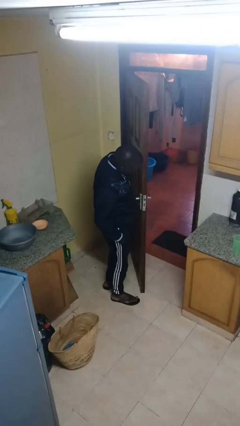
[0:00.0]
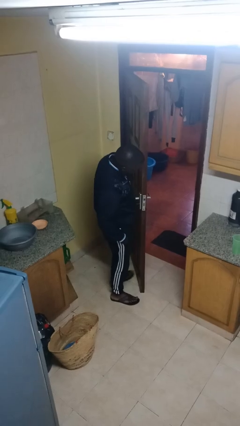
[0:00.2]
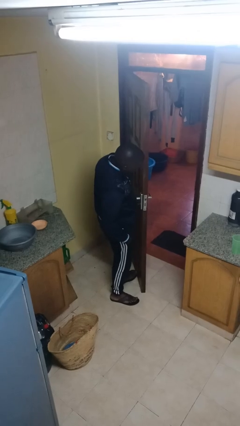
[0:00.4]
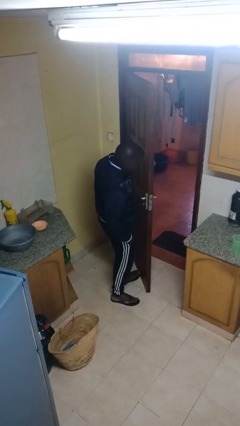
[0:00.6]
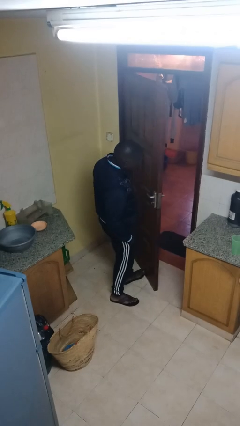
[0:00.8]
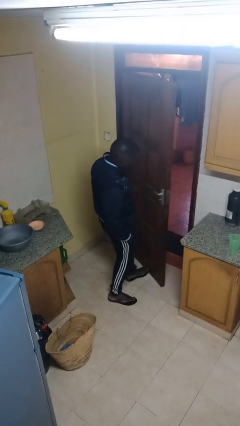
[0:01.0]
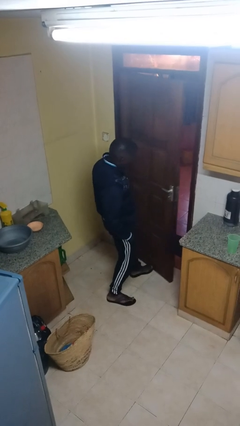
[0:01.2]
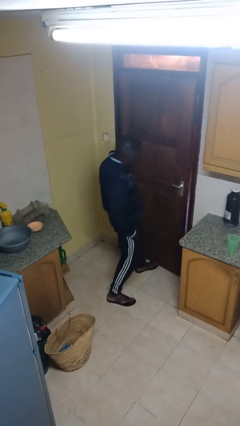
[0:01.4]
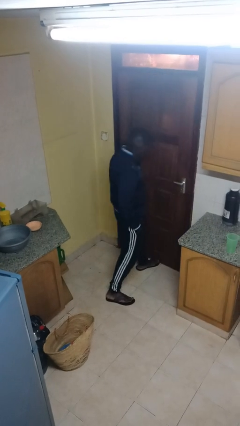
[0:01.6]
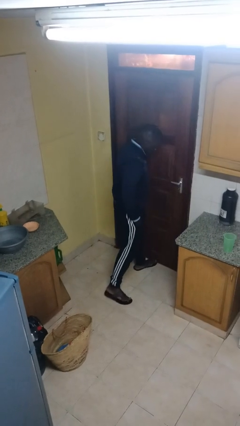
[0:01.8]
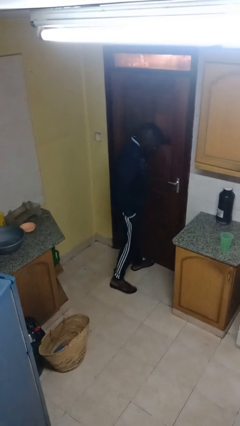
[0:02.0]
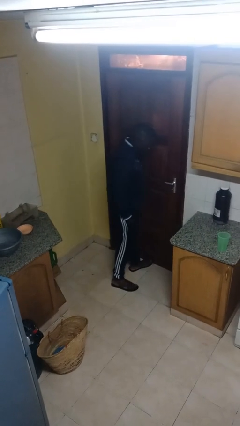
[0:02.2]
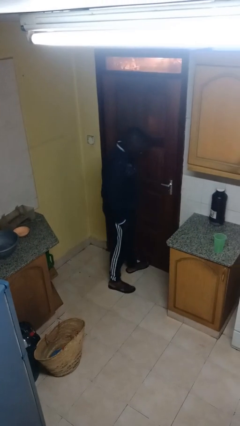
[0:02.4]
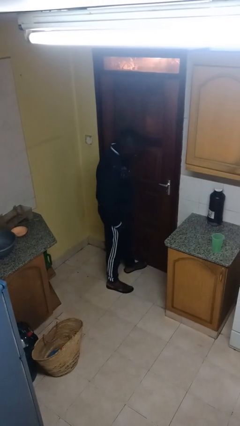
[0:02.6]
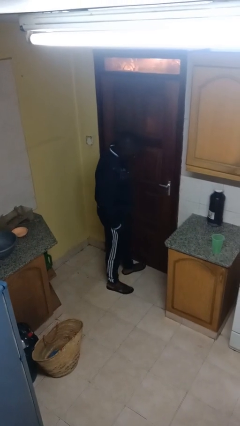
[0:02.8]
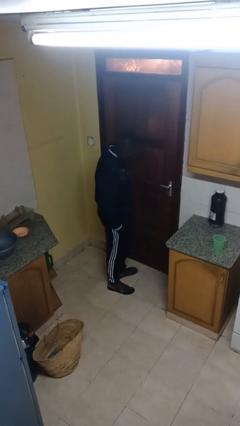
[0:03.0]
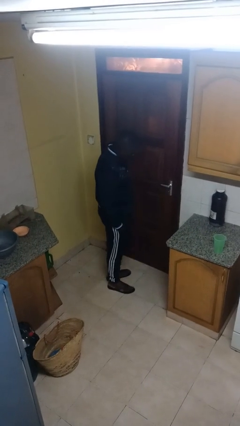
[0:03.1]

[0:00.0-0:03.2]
person closes door with foot

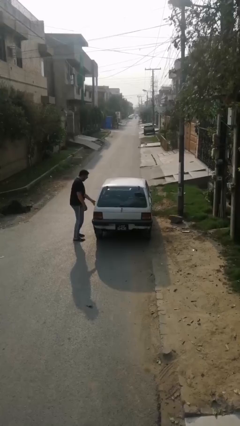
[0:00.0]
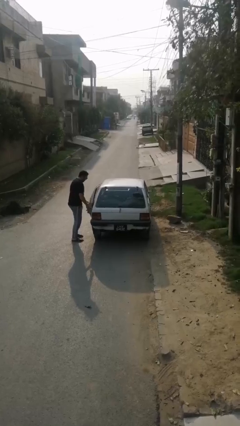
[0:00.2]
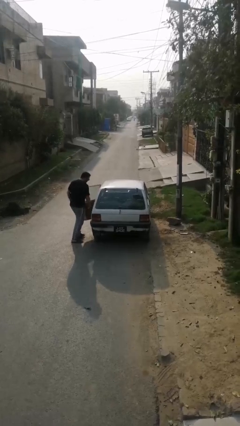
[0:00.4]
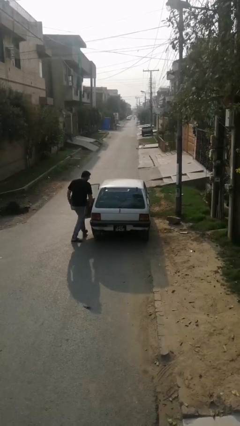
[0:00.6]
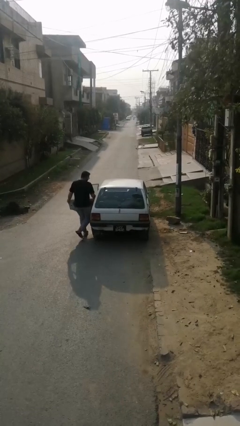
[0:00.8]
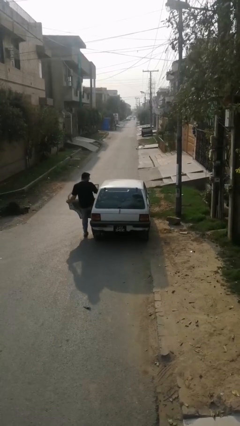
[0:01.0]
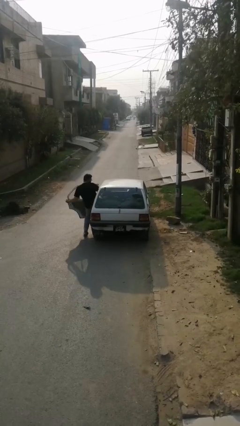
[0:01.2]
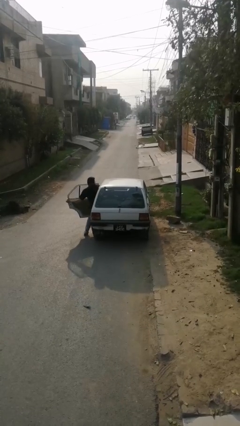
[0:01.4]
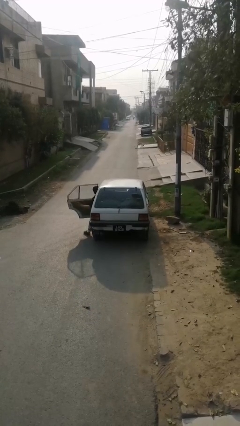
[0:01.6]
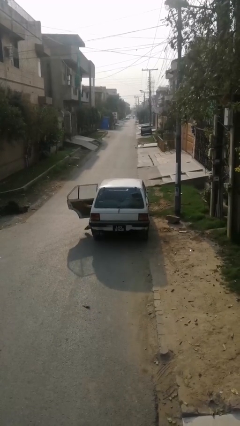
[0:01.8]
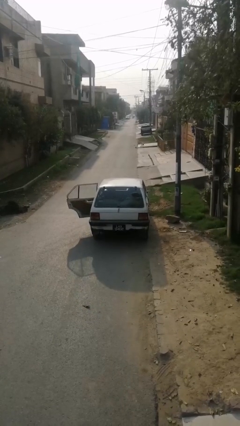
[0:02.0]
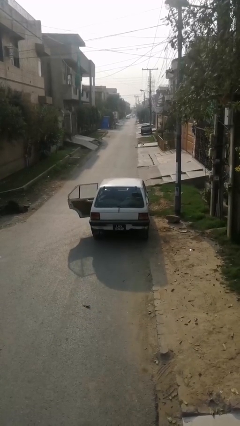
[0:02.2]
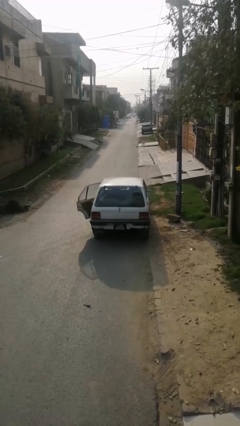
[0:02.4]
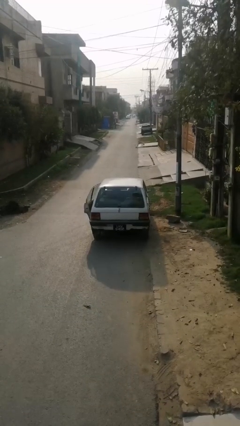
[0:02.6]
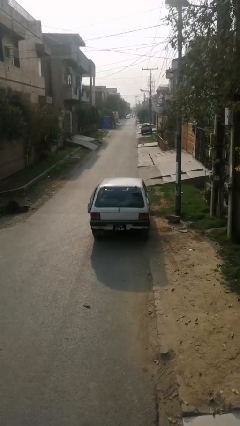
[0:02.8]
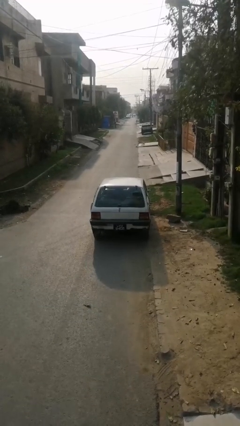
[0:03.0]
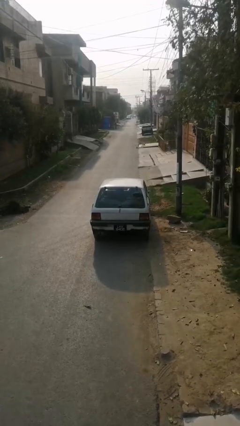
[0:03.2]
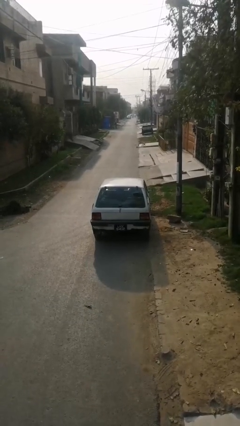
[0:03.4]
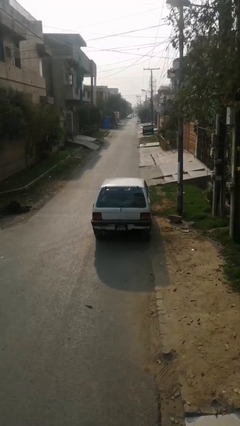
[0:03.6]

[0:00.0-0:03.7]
car picks up person

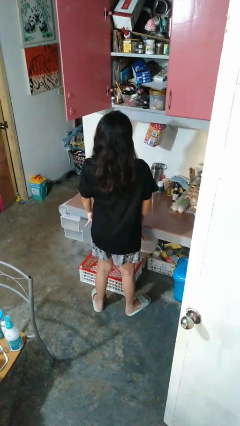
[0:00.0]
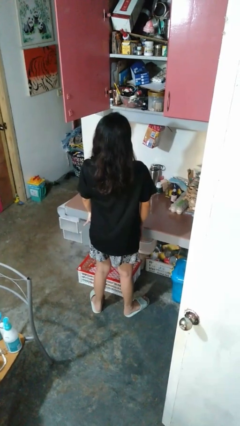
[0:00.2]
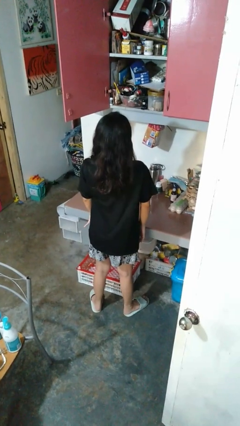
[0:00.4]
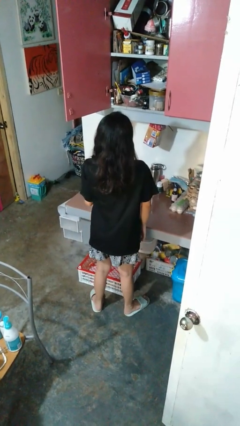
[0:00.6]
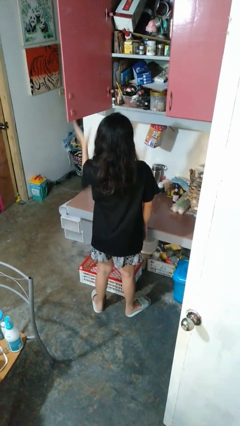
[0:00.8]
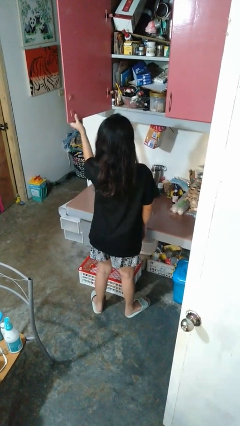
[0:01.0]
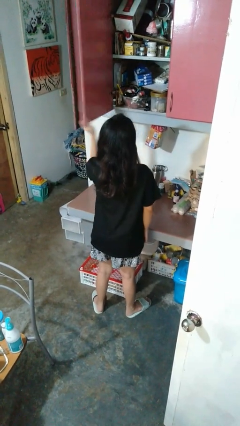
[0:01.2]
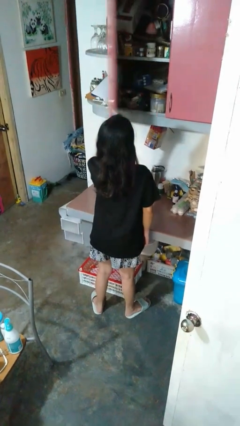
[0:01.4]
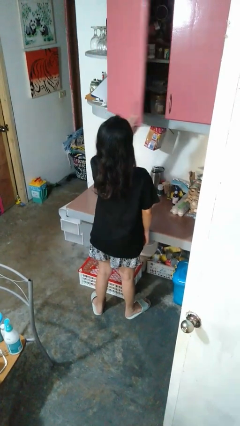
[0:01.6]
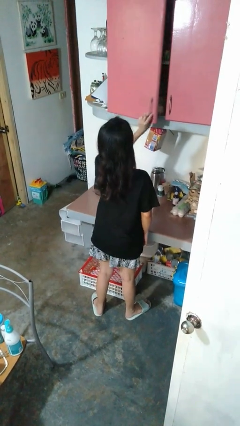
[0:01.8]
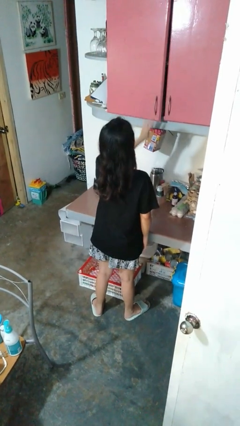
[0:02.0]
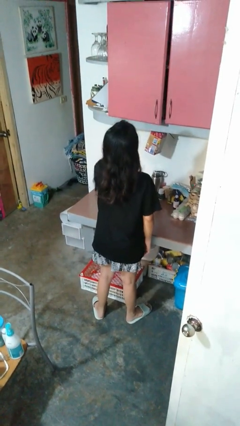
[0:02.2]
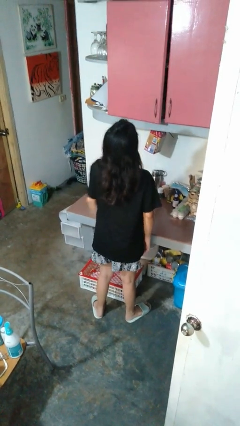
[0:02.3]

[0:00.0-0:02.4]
person closes cabinet

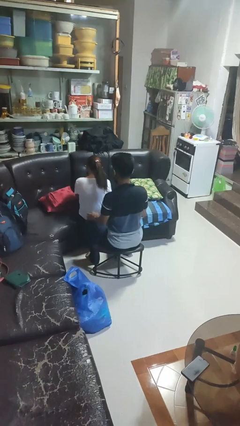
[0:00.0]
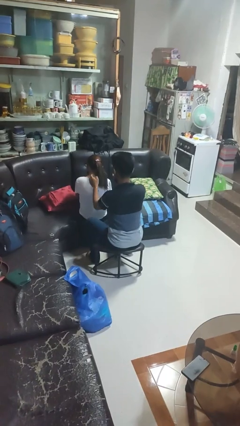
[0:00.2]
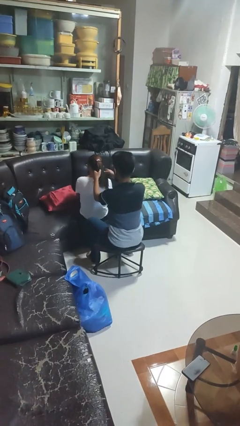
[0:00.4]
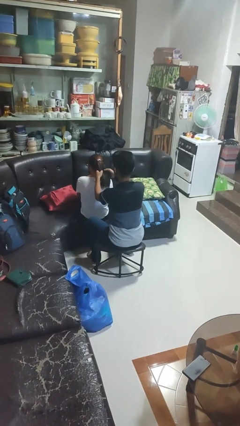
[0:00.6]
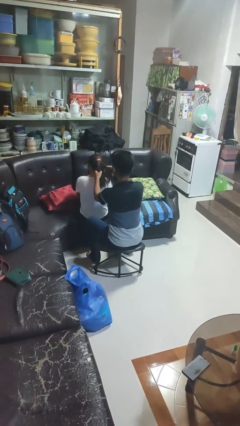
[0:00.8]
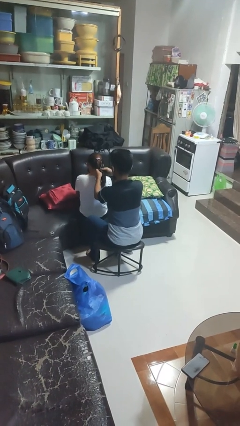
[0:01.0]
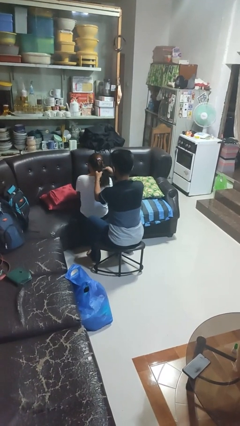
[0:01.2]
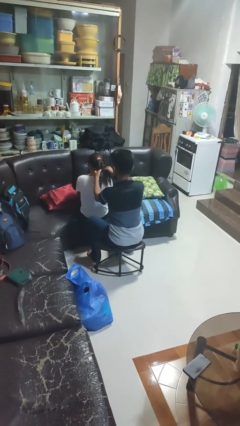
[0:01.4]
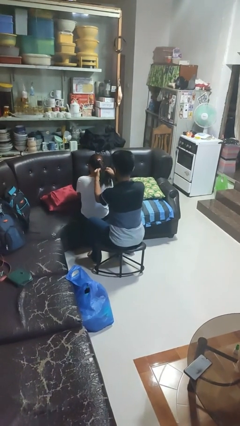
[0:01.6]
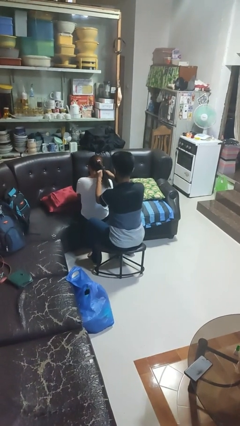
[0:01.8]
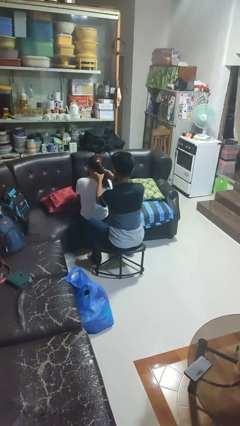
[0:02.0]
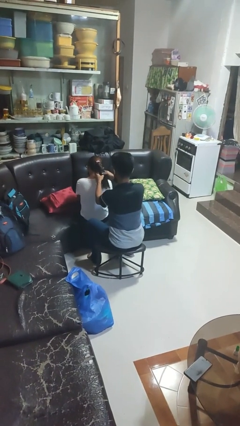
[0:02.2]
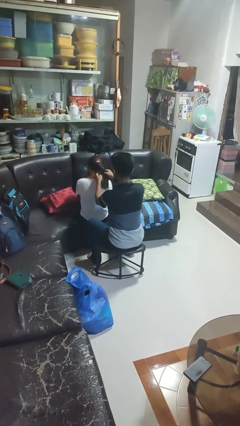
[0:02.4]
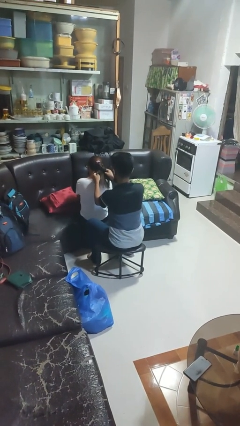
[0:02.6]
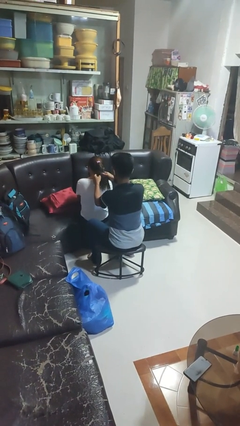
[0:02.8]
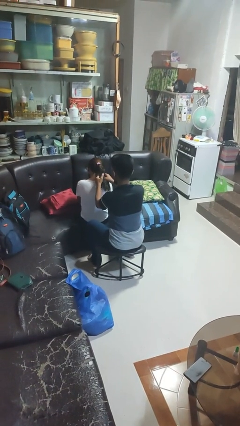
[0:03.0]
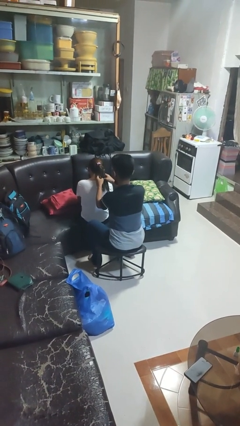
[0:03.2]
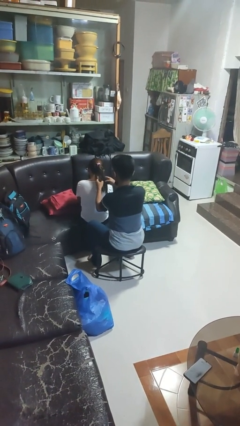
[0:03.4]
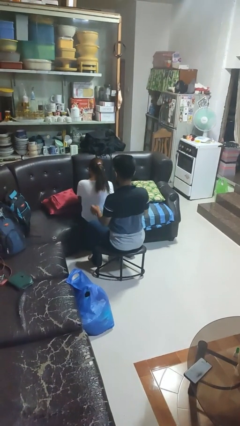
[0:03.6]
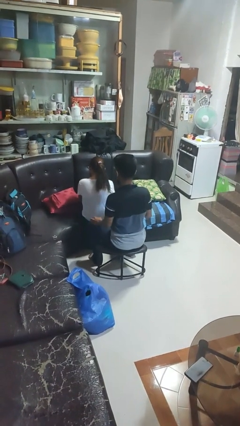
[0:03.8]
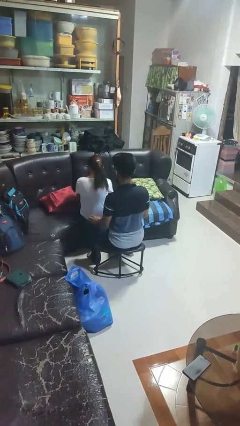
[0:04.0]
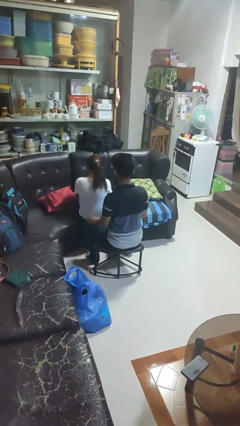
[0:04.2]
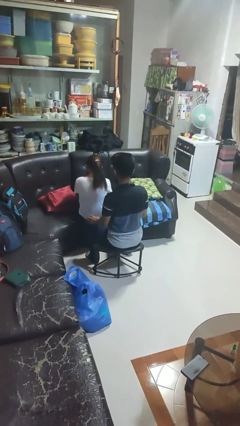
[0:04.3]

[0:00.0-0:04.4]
person braids hair of person

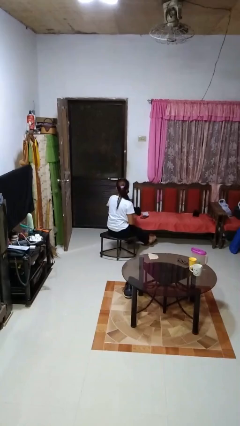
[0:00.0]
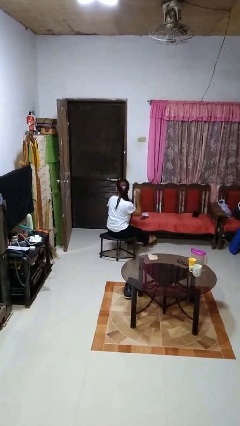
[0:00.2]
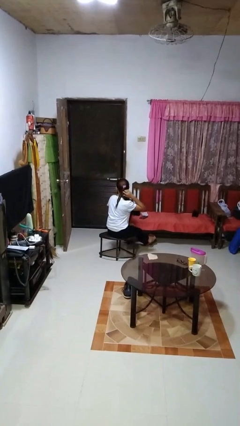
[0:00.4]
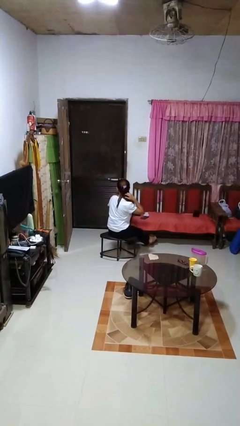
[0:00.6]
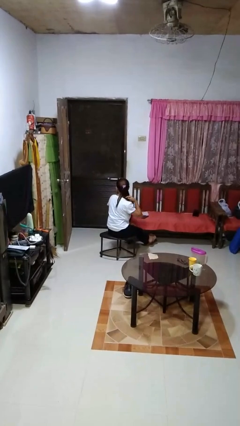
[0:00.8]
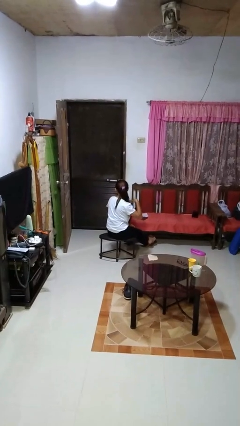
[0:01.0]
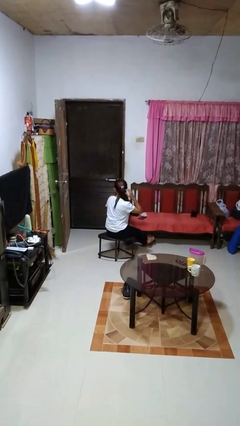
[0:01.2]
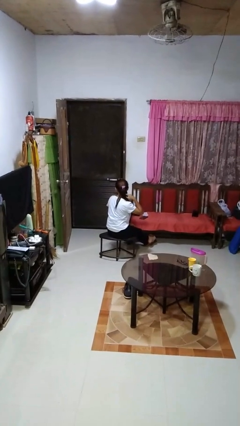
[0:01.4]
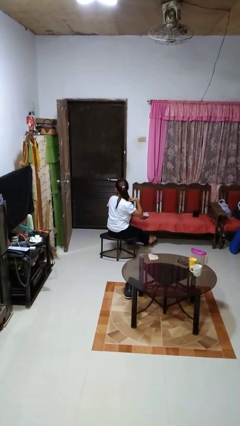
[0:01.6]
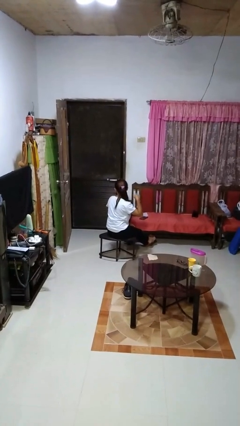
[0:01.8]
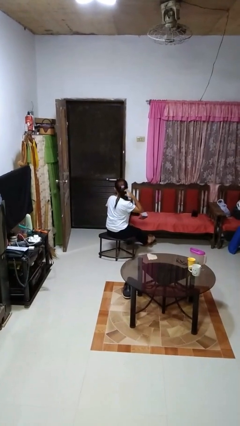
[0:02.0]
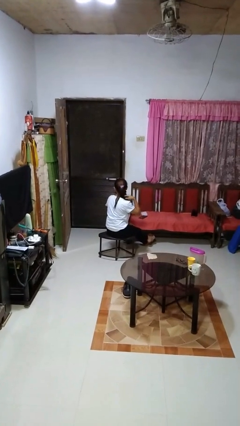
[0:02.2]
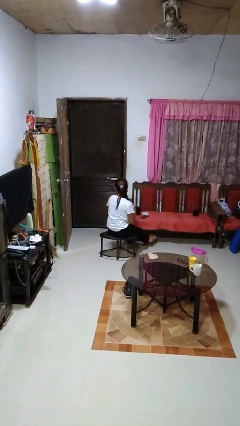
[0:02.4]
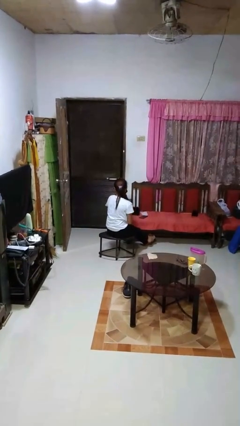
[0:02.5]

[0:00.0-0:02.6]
person strokes hair

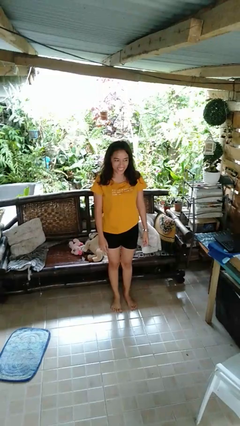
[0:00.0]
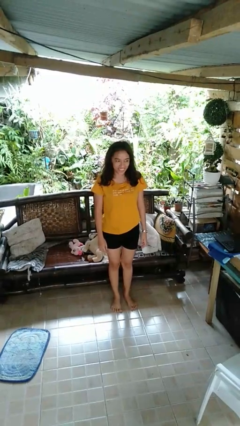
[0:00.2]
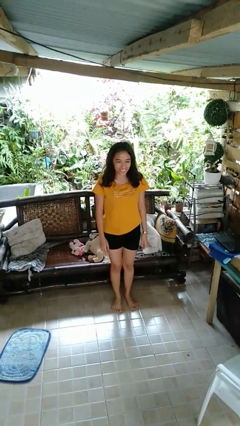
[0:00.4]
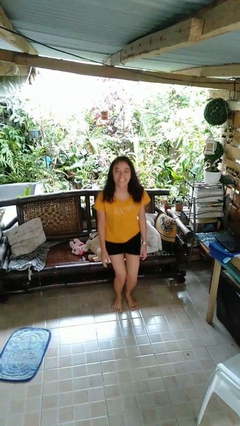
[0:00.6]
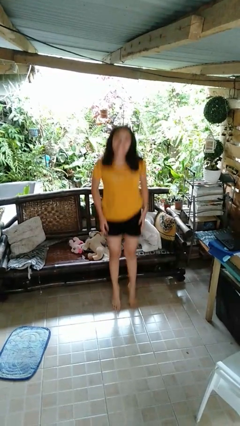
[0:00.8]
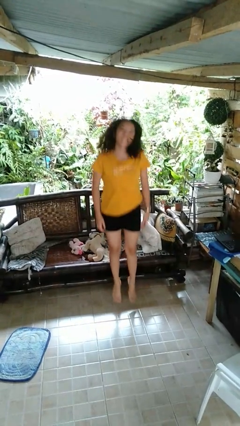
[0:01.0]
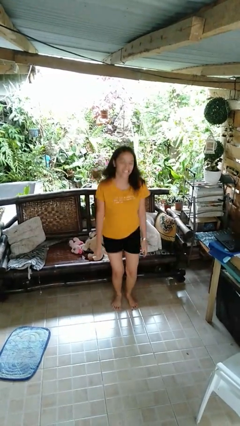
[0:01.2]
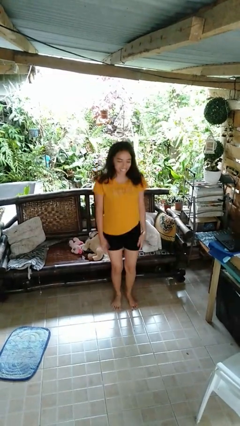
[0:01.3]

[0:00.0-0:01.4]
person jumps
